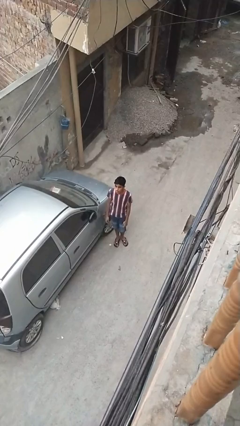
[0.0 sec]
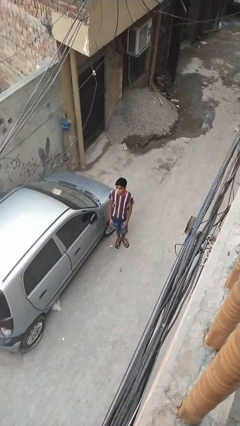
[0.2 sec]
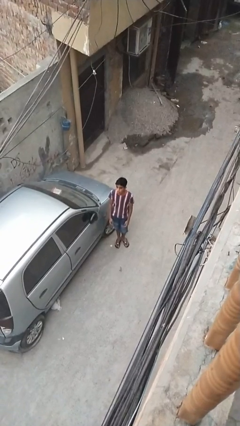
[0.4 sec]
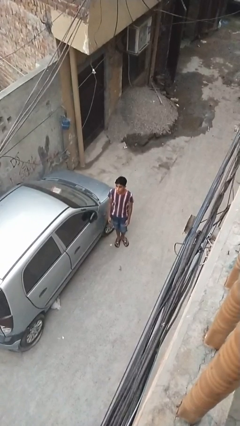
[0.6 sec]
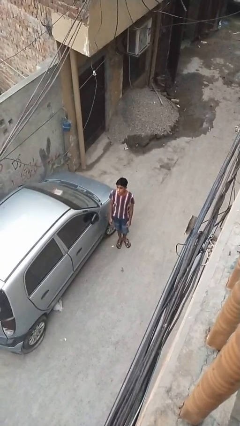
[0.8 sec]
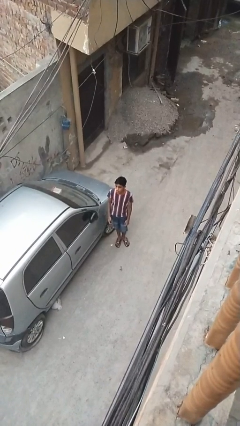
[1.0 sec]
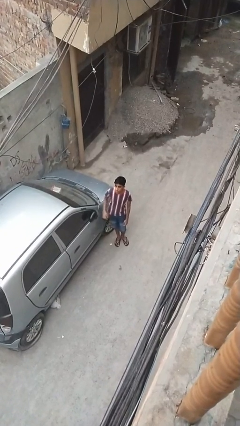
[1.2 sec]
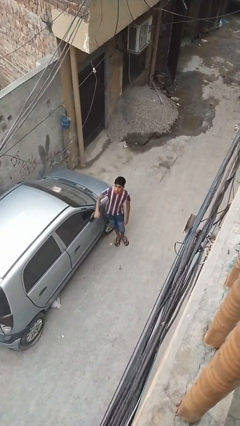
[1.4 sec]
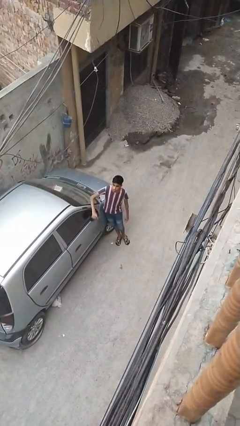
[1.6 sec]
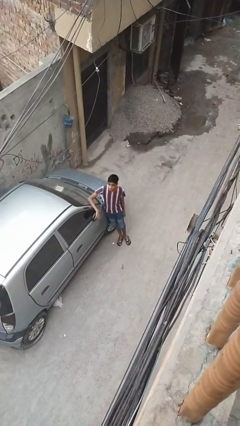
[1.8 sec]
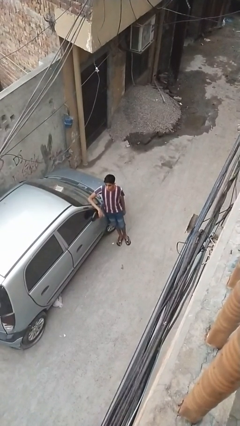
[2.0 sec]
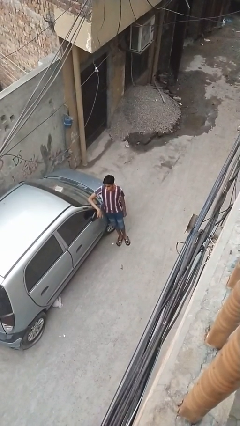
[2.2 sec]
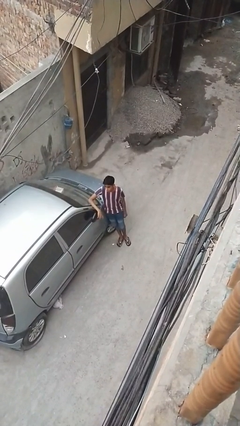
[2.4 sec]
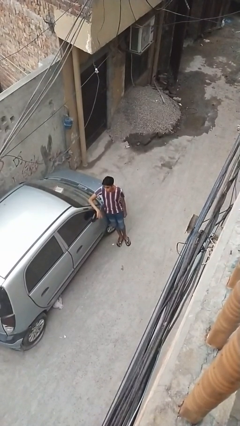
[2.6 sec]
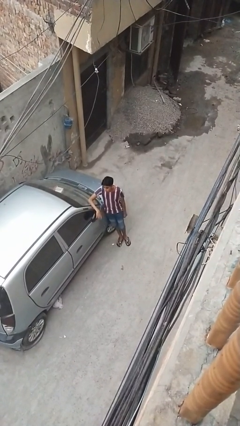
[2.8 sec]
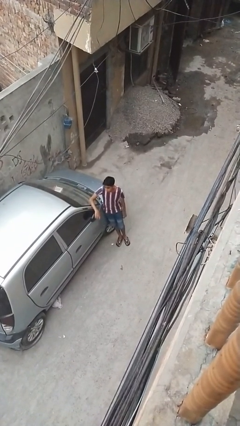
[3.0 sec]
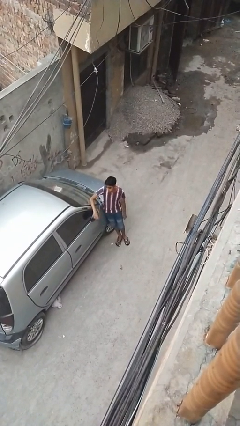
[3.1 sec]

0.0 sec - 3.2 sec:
person leans against car

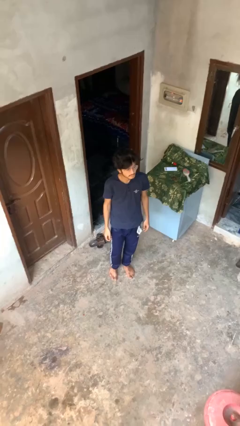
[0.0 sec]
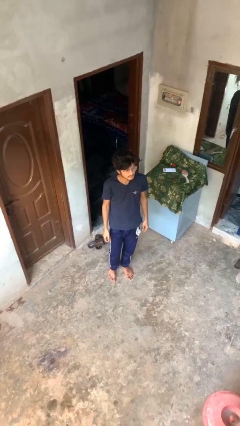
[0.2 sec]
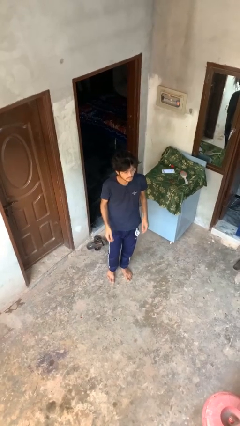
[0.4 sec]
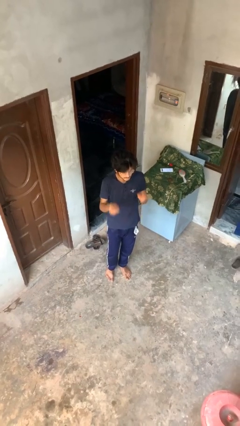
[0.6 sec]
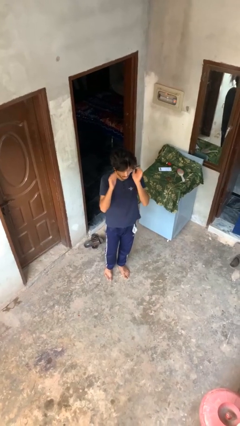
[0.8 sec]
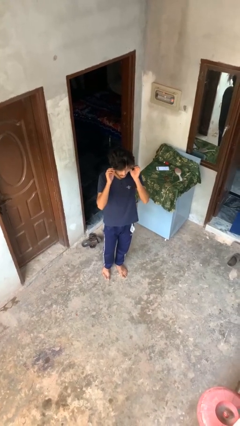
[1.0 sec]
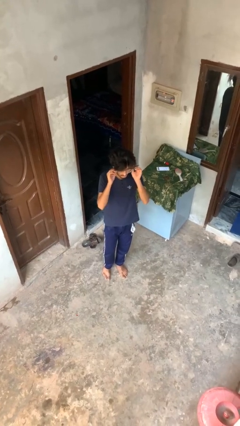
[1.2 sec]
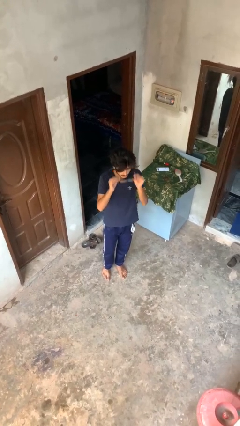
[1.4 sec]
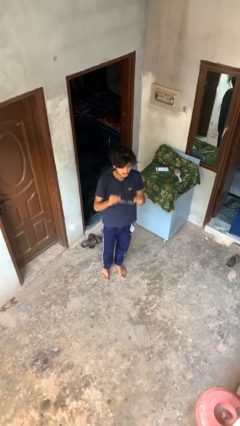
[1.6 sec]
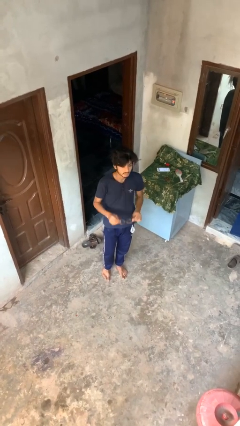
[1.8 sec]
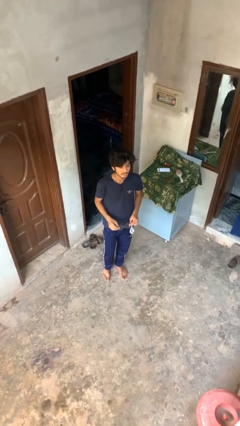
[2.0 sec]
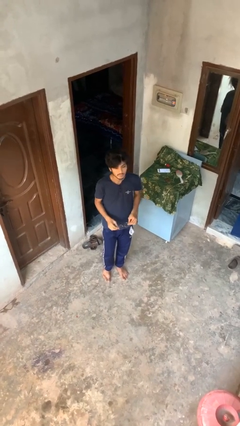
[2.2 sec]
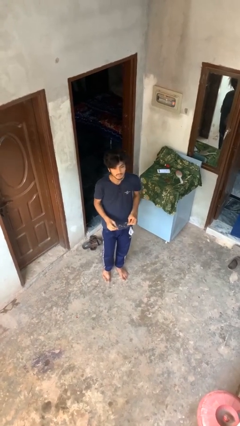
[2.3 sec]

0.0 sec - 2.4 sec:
person takes off glasses

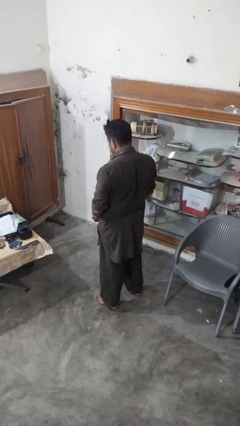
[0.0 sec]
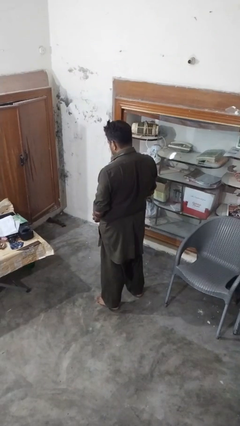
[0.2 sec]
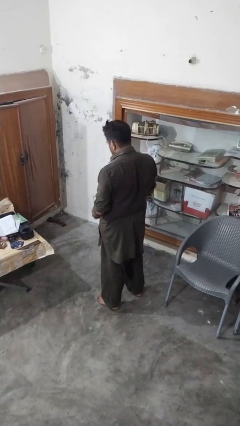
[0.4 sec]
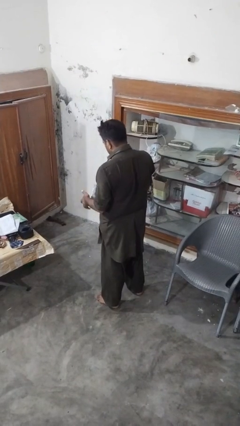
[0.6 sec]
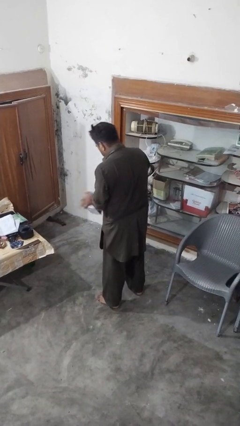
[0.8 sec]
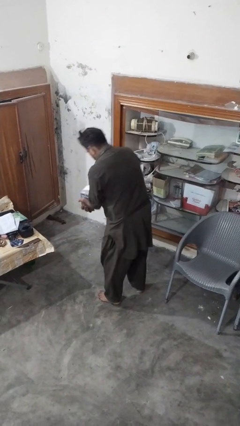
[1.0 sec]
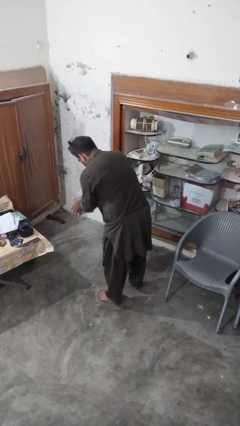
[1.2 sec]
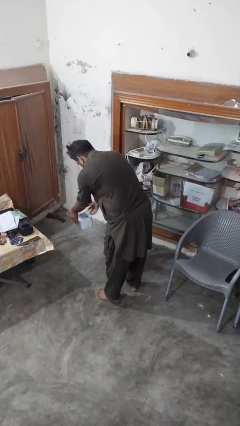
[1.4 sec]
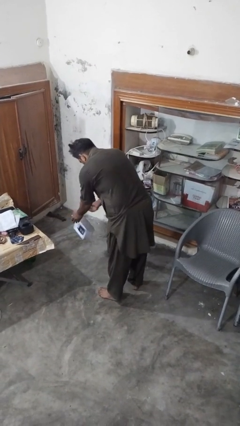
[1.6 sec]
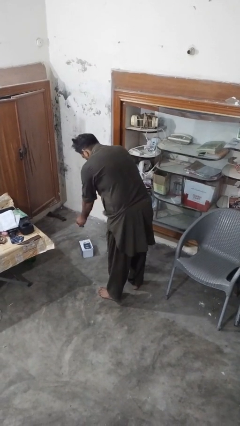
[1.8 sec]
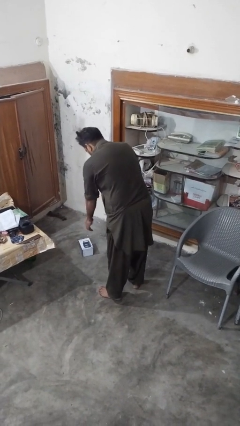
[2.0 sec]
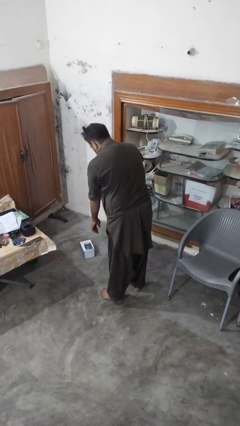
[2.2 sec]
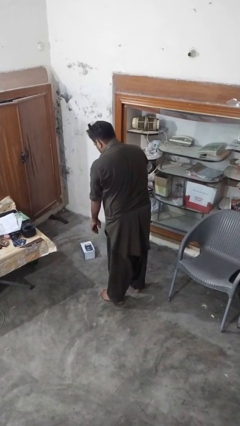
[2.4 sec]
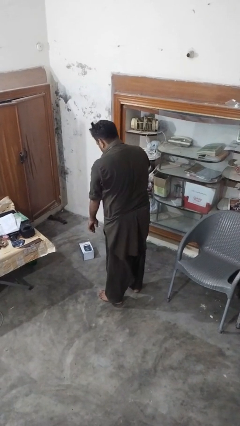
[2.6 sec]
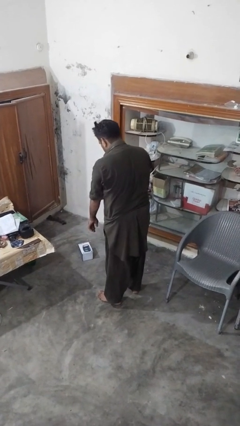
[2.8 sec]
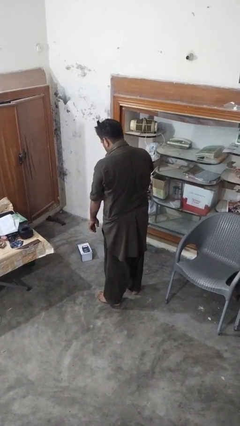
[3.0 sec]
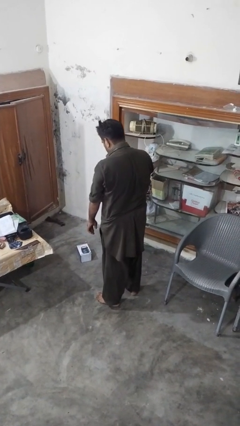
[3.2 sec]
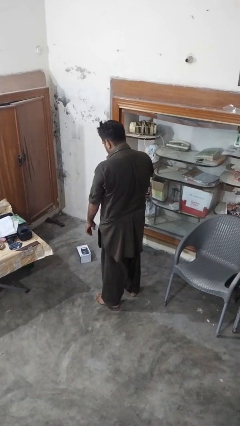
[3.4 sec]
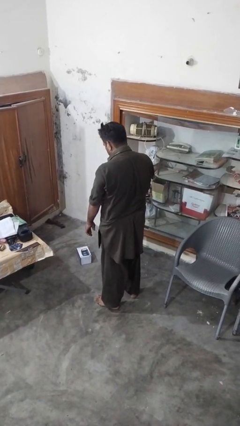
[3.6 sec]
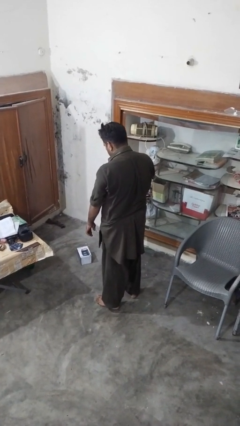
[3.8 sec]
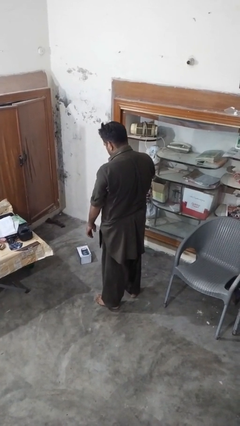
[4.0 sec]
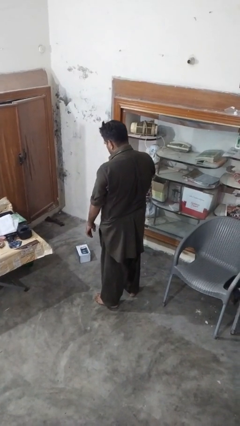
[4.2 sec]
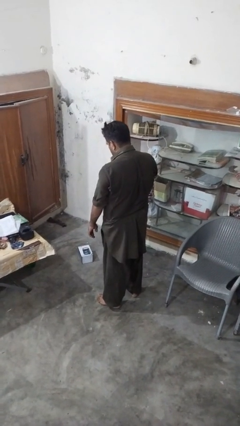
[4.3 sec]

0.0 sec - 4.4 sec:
person drops object

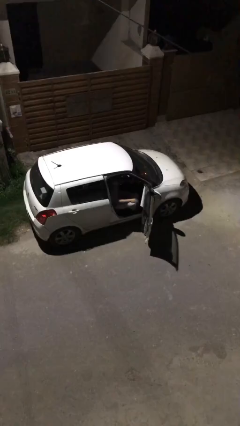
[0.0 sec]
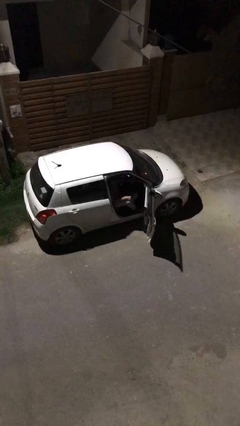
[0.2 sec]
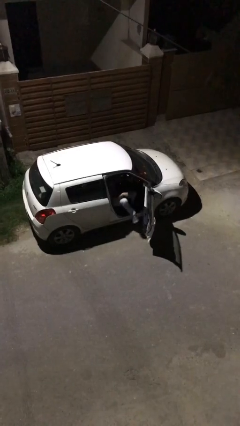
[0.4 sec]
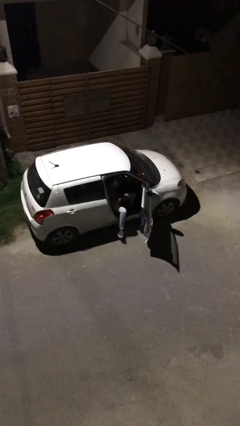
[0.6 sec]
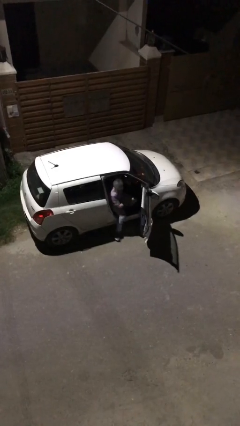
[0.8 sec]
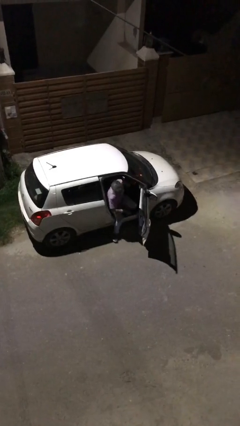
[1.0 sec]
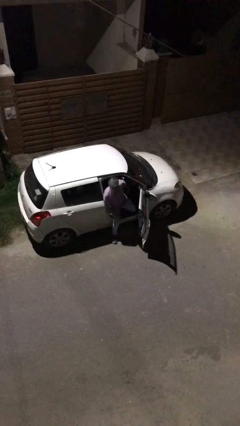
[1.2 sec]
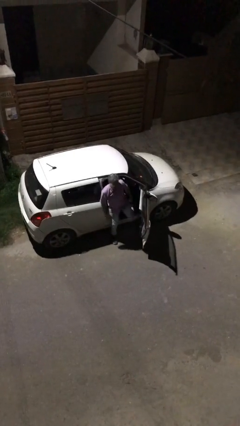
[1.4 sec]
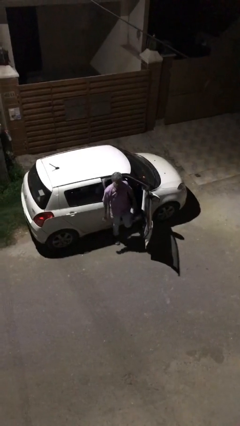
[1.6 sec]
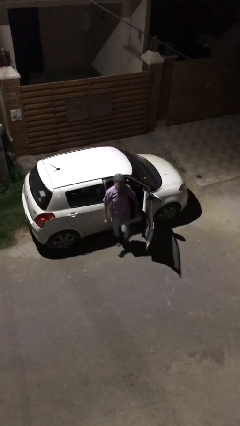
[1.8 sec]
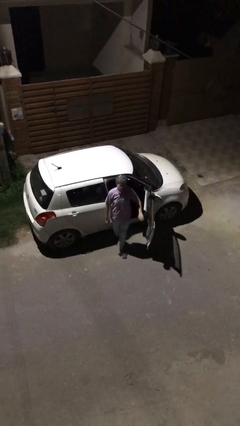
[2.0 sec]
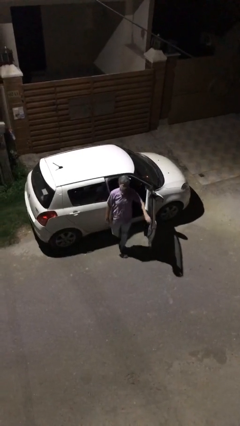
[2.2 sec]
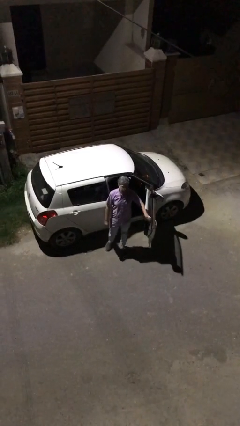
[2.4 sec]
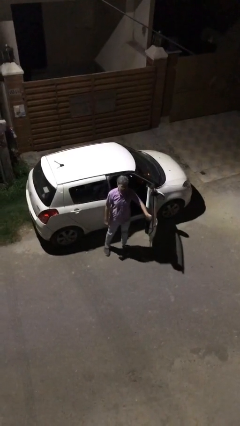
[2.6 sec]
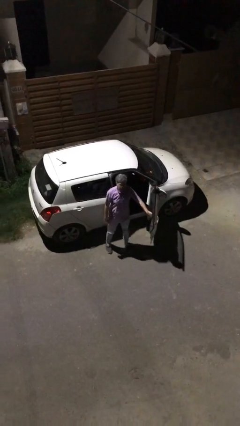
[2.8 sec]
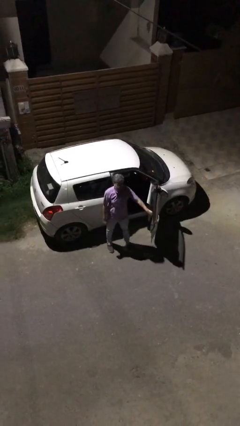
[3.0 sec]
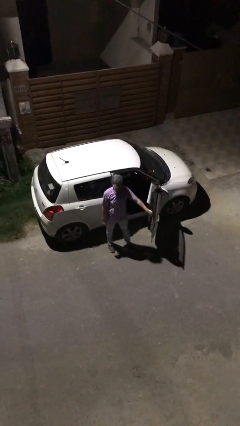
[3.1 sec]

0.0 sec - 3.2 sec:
person exits car

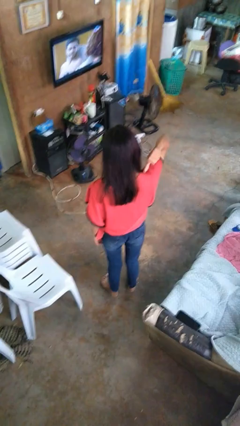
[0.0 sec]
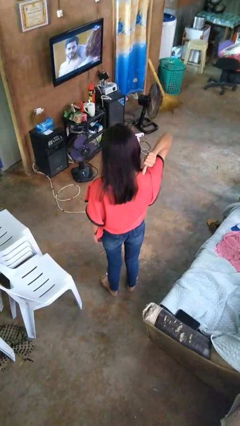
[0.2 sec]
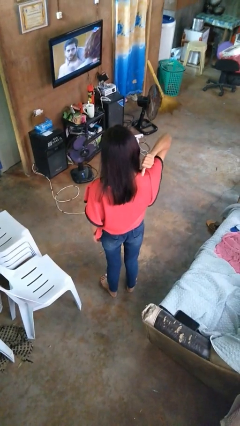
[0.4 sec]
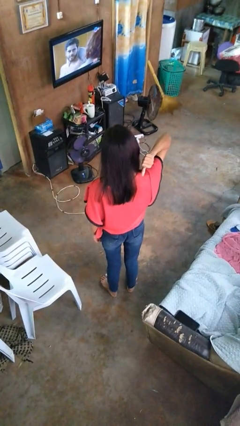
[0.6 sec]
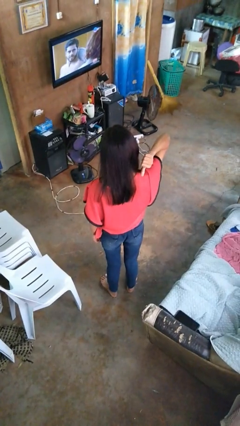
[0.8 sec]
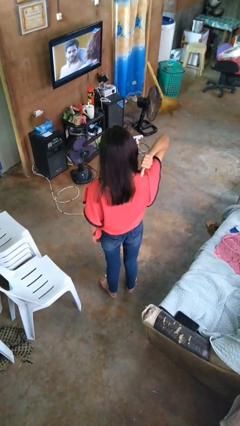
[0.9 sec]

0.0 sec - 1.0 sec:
person gestures behind me

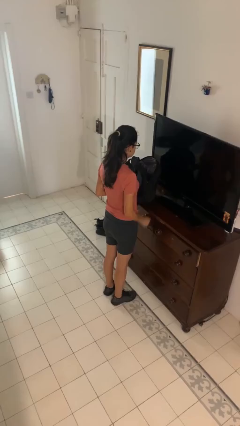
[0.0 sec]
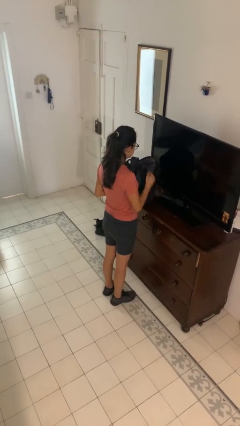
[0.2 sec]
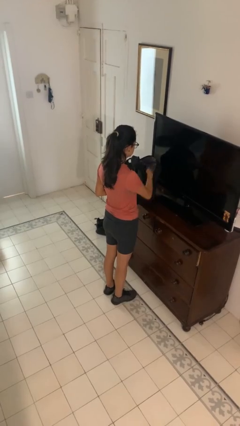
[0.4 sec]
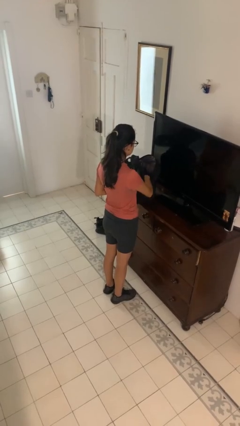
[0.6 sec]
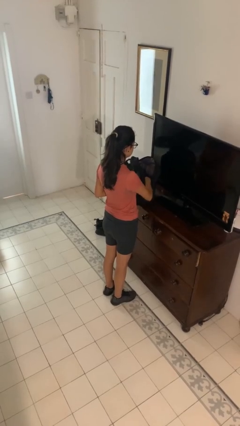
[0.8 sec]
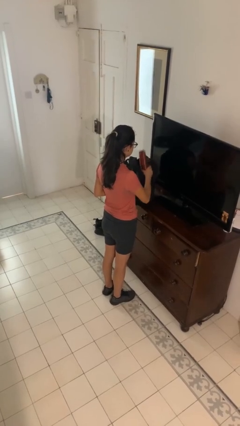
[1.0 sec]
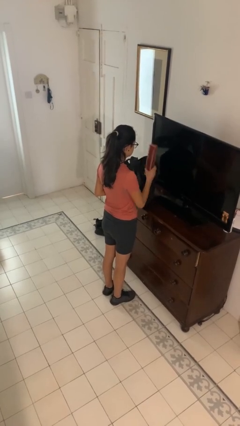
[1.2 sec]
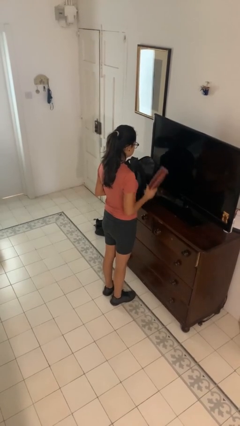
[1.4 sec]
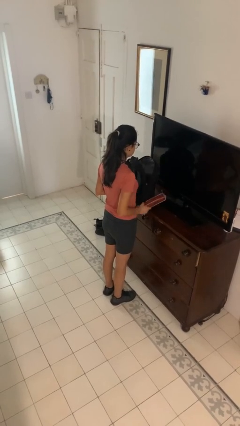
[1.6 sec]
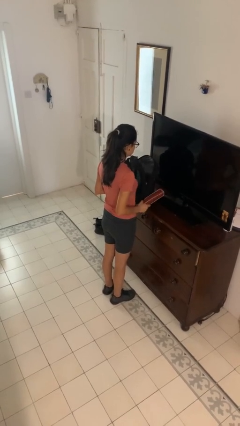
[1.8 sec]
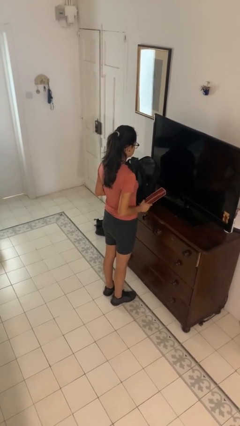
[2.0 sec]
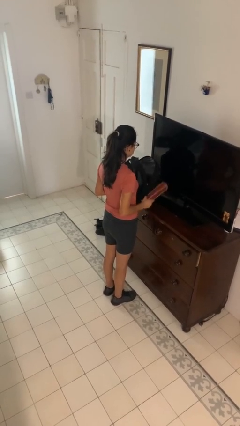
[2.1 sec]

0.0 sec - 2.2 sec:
person takes object from bag

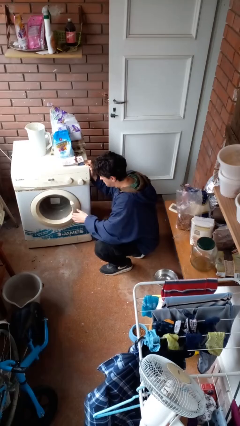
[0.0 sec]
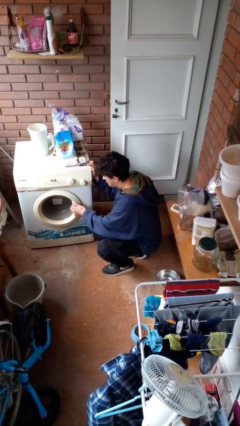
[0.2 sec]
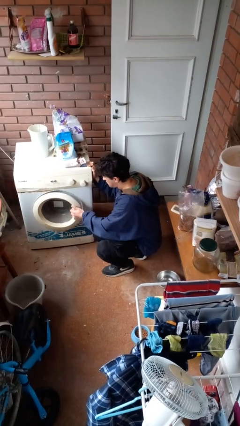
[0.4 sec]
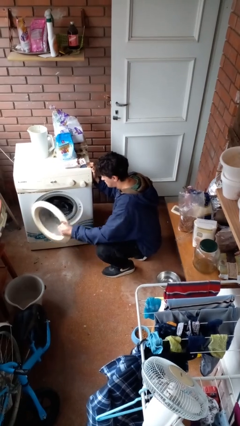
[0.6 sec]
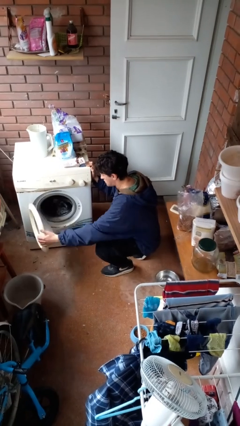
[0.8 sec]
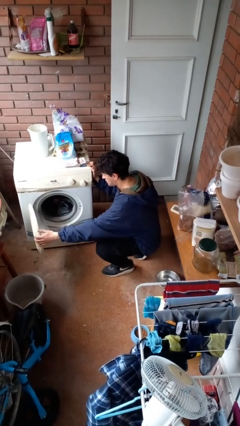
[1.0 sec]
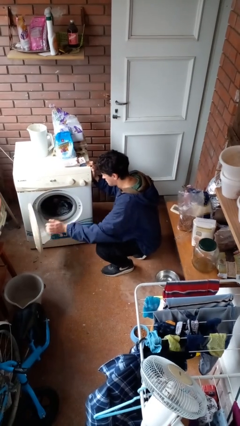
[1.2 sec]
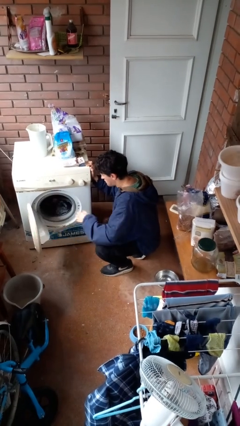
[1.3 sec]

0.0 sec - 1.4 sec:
person opens clothes washer
